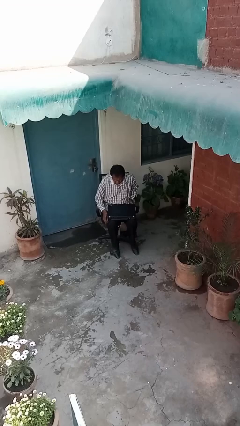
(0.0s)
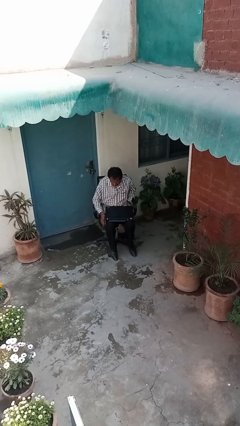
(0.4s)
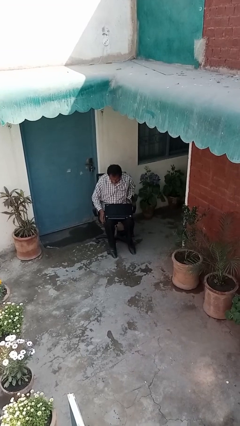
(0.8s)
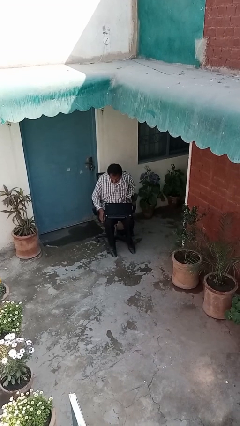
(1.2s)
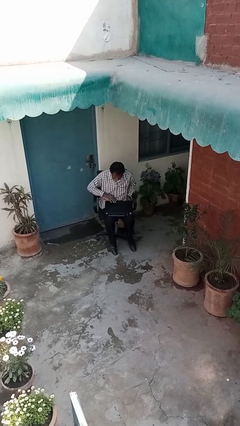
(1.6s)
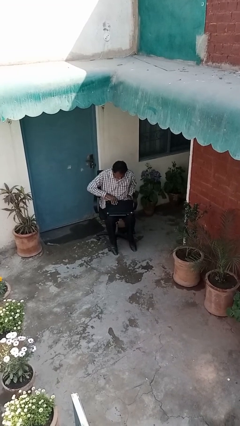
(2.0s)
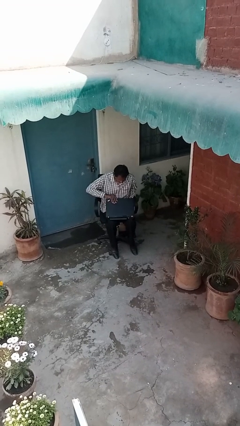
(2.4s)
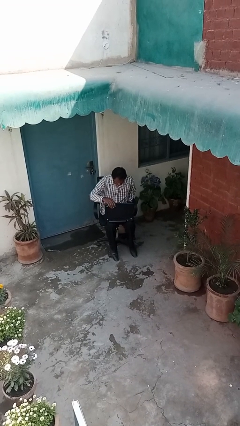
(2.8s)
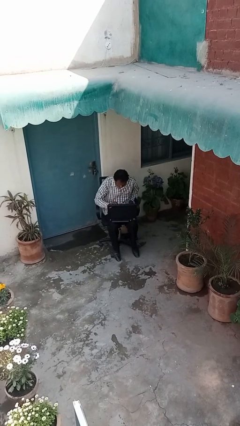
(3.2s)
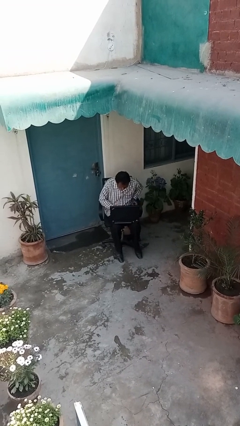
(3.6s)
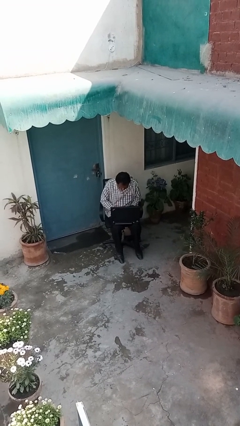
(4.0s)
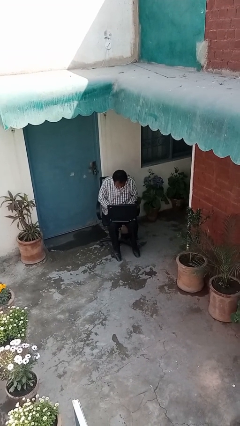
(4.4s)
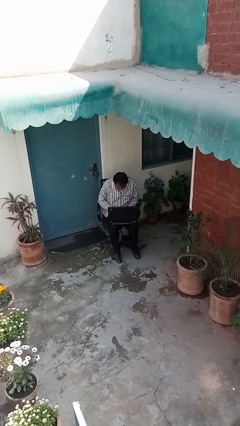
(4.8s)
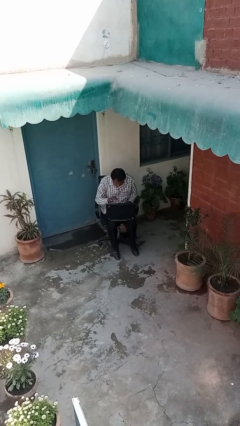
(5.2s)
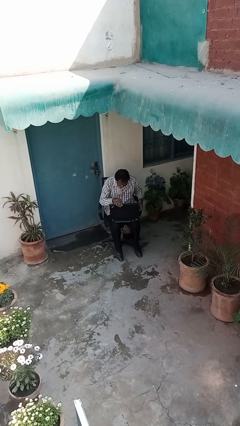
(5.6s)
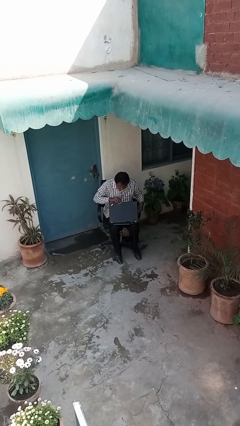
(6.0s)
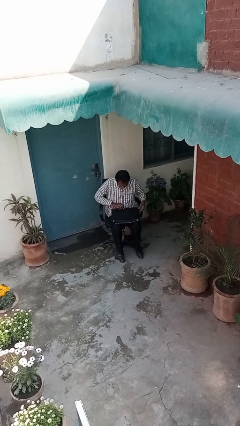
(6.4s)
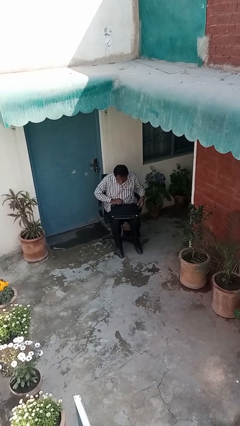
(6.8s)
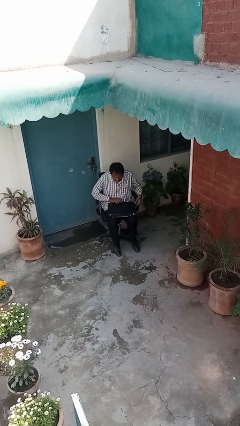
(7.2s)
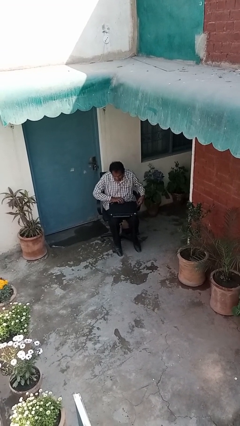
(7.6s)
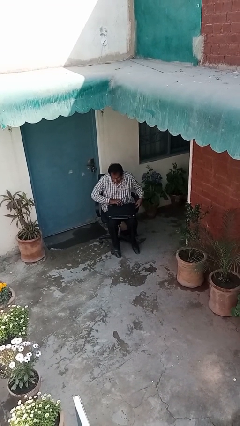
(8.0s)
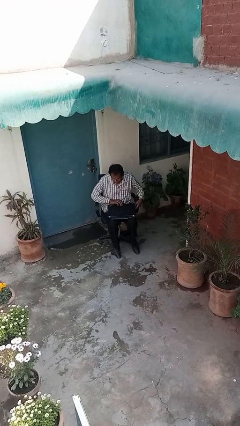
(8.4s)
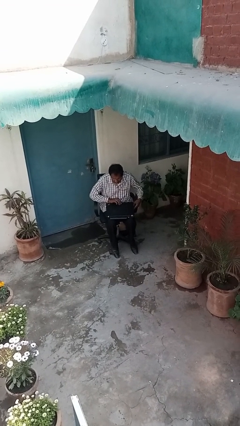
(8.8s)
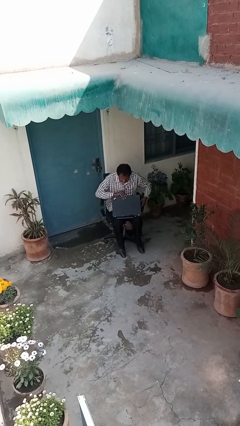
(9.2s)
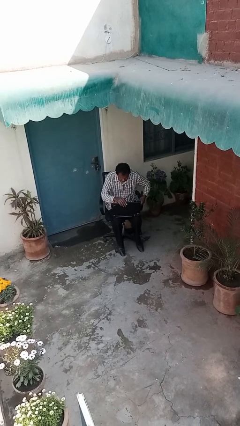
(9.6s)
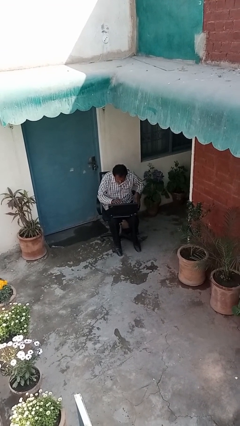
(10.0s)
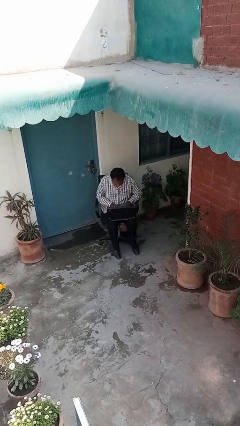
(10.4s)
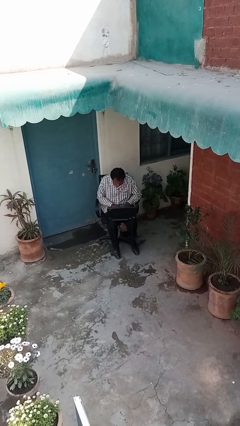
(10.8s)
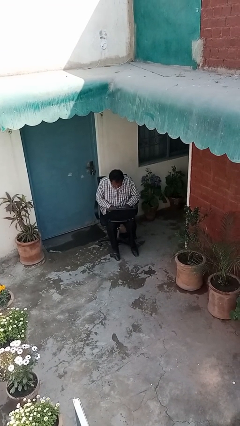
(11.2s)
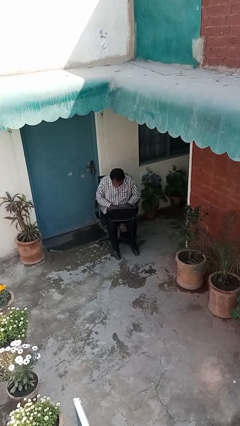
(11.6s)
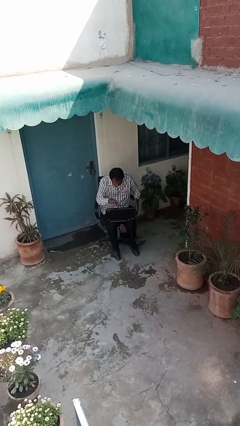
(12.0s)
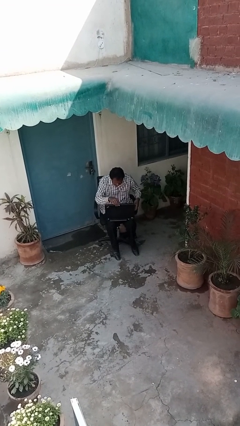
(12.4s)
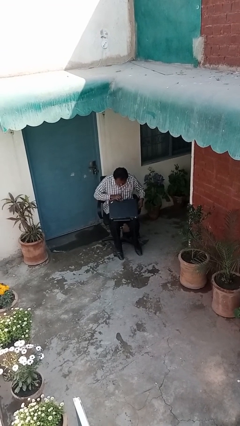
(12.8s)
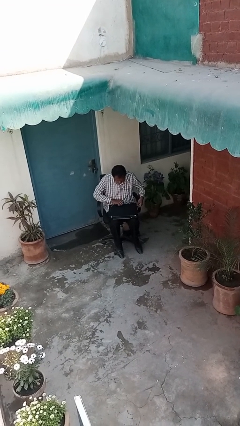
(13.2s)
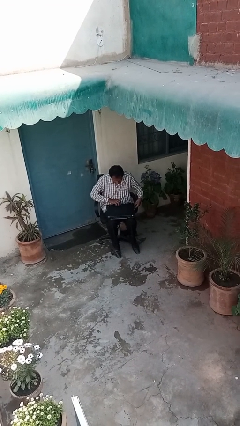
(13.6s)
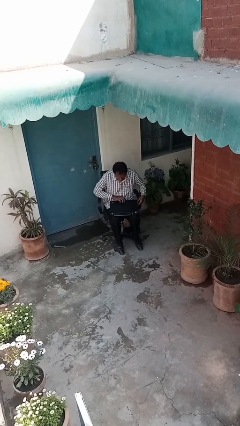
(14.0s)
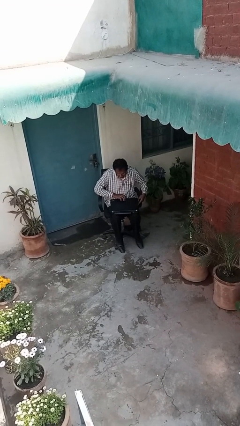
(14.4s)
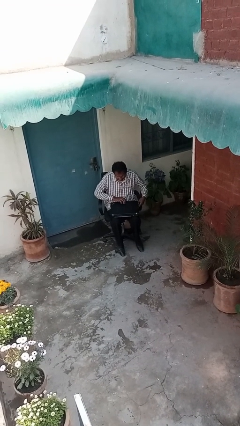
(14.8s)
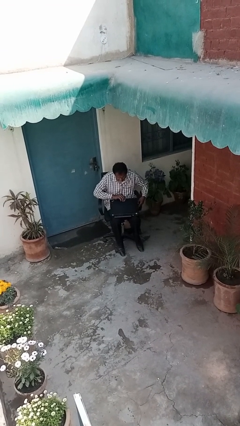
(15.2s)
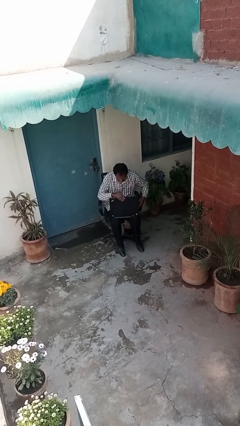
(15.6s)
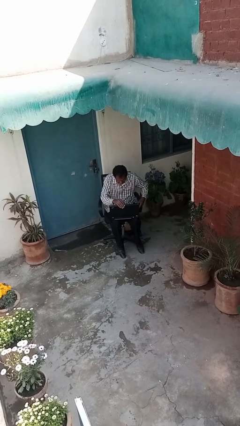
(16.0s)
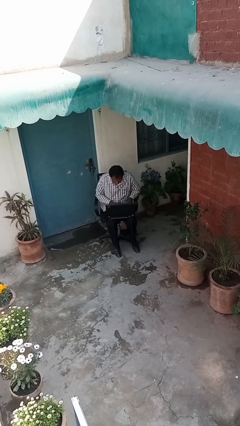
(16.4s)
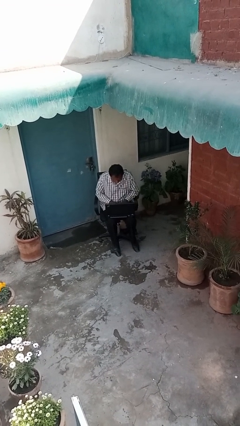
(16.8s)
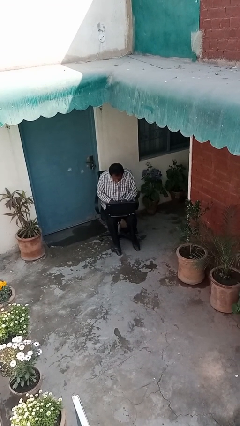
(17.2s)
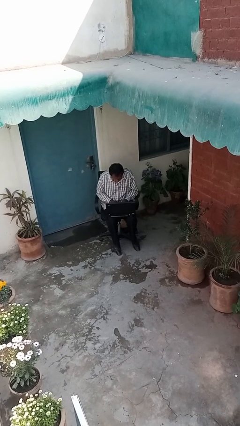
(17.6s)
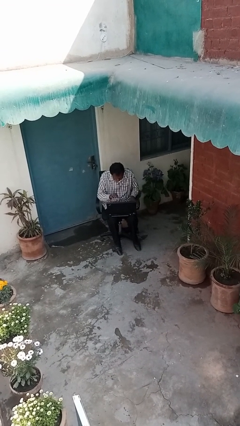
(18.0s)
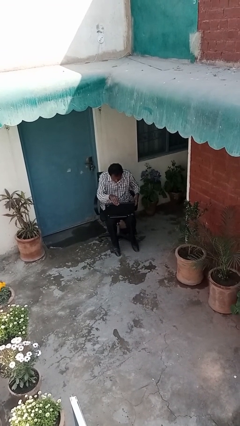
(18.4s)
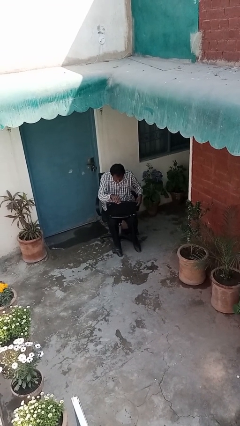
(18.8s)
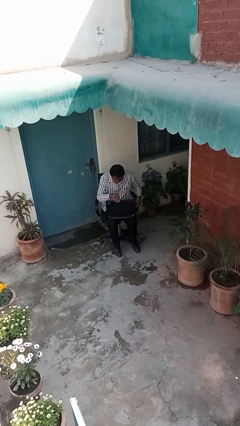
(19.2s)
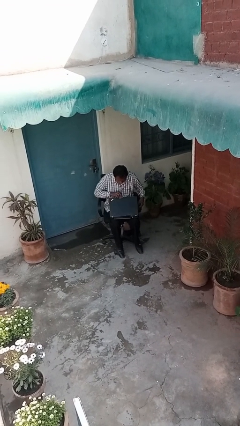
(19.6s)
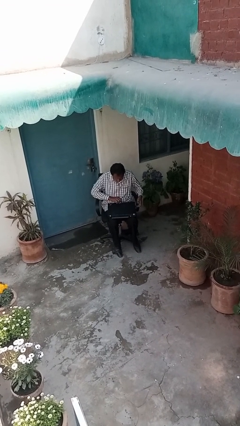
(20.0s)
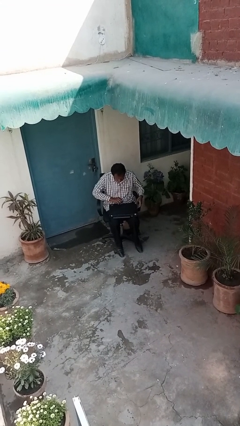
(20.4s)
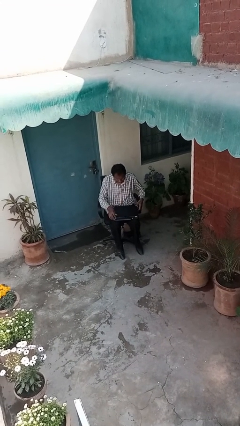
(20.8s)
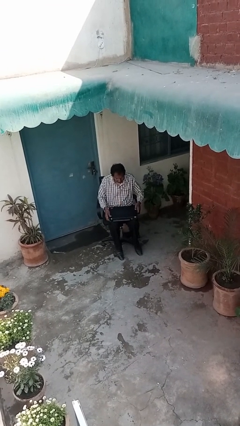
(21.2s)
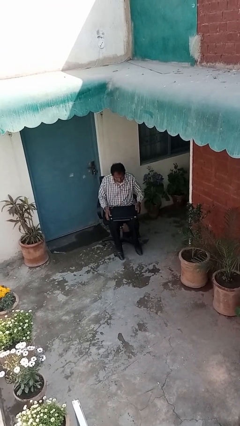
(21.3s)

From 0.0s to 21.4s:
person interacts with laptop

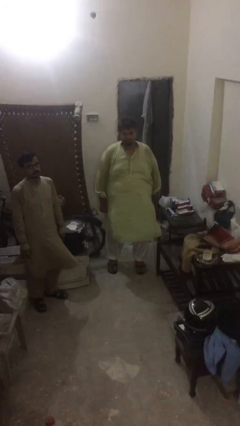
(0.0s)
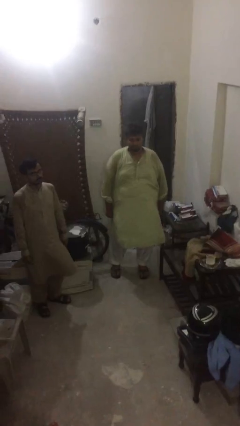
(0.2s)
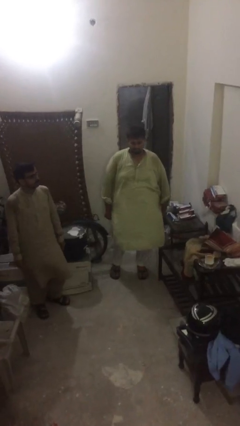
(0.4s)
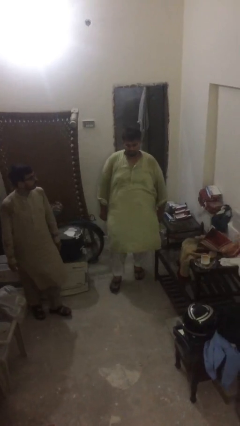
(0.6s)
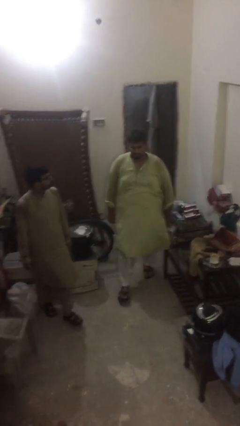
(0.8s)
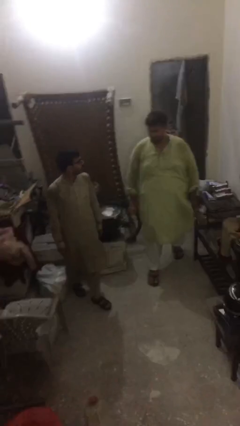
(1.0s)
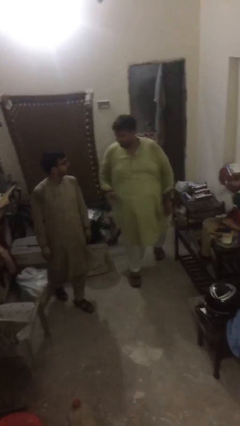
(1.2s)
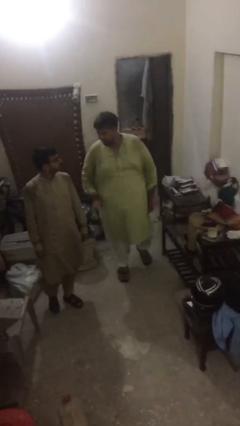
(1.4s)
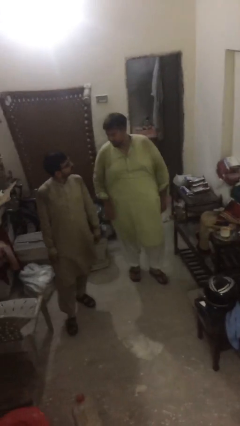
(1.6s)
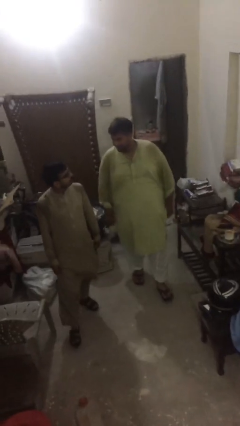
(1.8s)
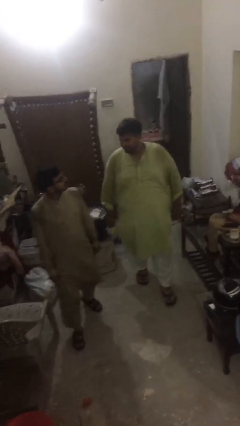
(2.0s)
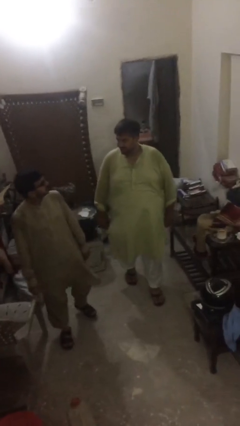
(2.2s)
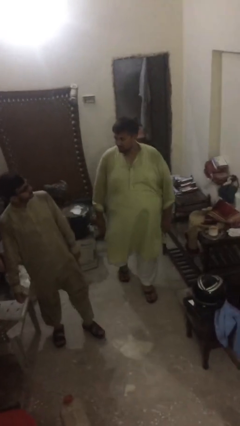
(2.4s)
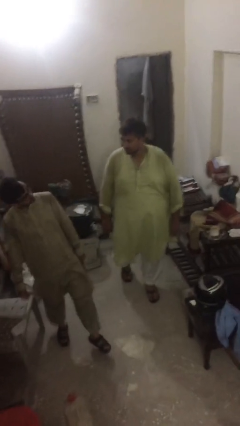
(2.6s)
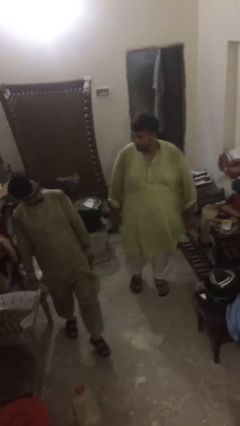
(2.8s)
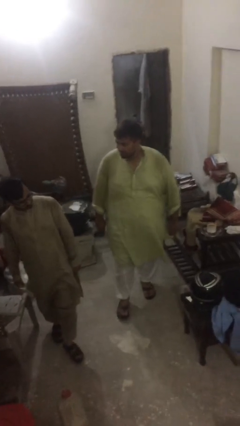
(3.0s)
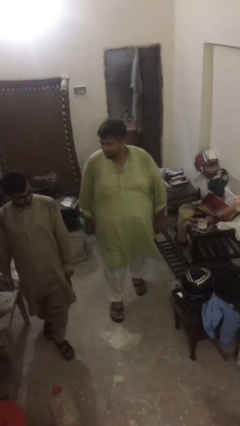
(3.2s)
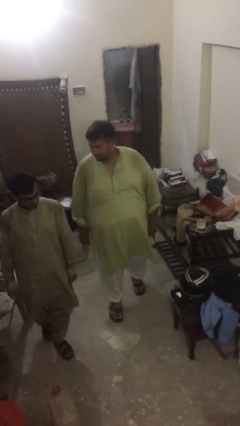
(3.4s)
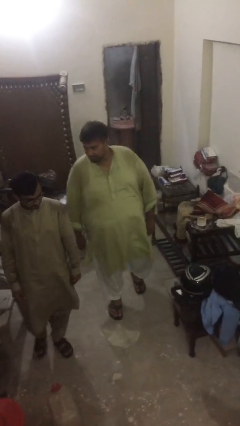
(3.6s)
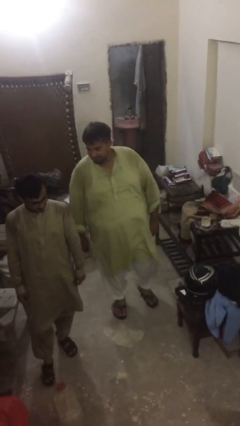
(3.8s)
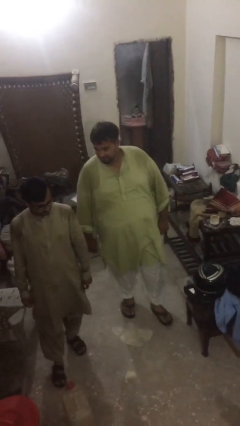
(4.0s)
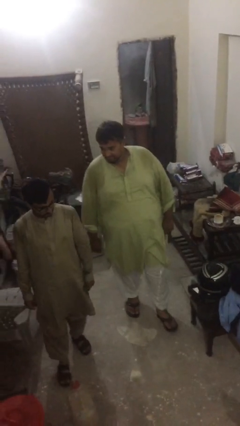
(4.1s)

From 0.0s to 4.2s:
person talks to person

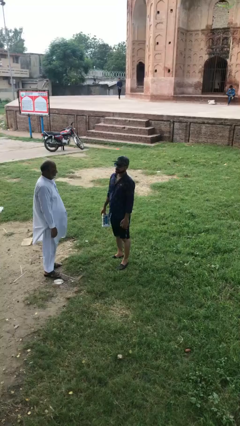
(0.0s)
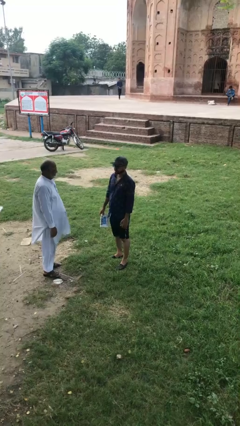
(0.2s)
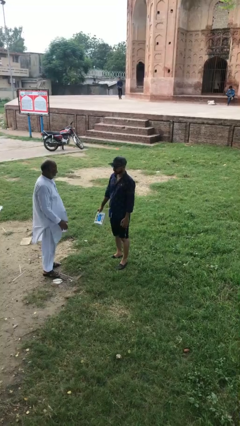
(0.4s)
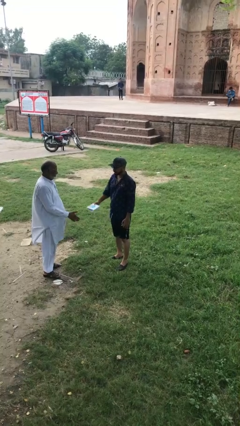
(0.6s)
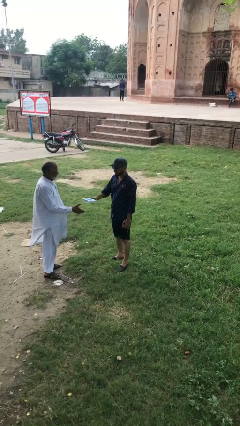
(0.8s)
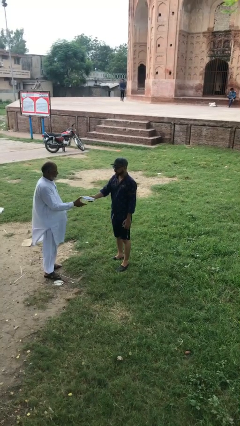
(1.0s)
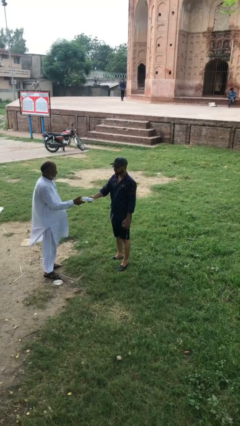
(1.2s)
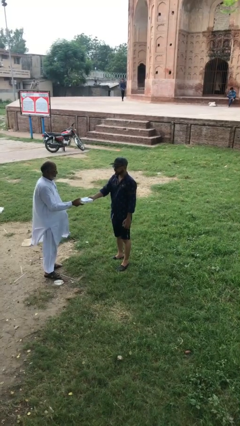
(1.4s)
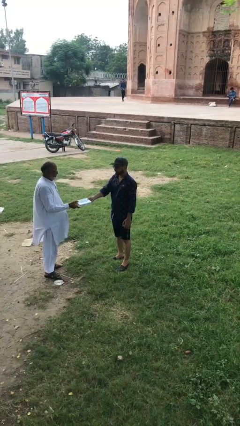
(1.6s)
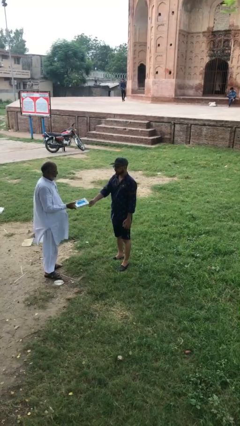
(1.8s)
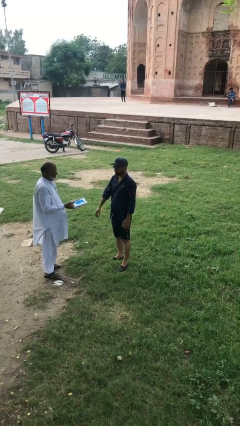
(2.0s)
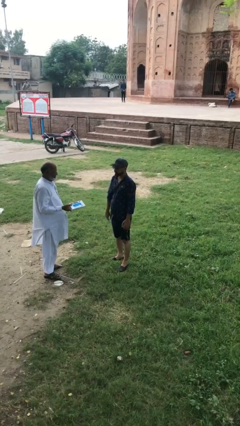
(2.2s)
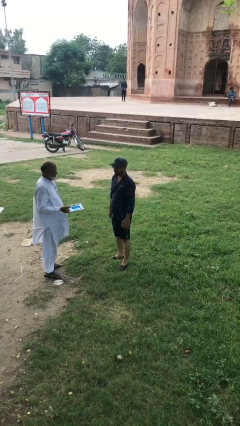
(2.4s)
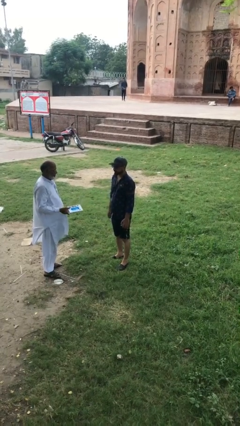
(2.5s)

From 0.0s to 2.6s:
person transfers object to person

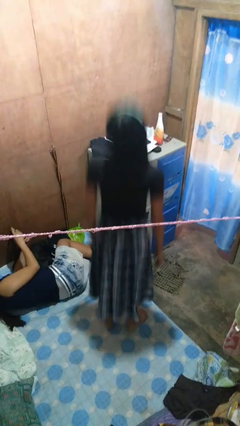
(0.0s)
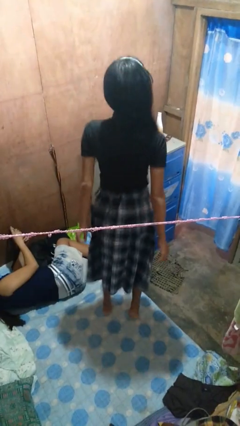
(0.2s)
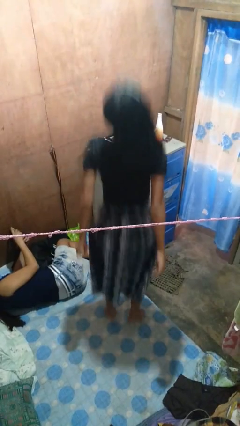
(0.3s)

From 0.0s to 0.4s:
person jumps on bed
